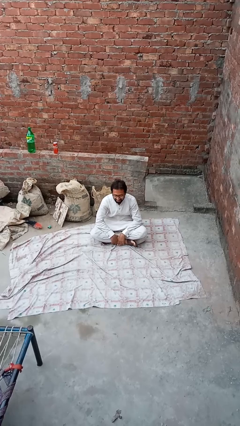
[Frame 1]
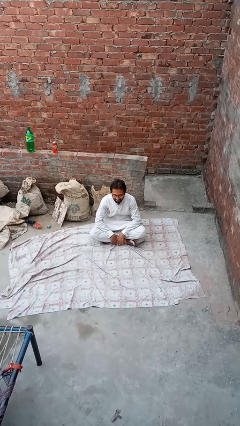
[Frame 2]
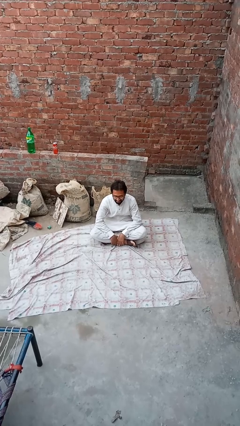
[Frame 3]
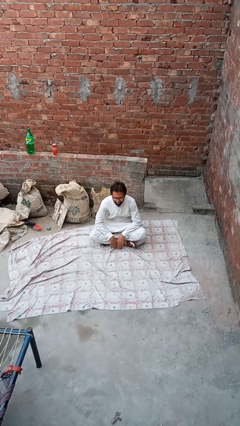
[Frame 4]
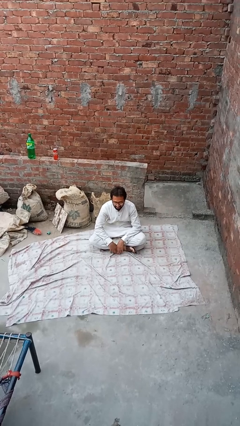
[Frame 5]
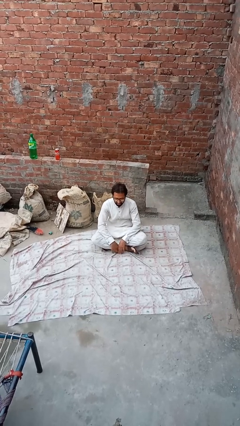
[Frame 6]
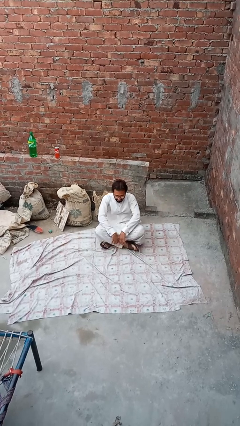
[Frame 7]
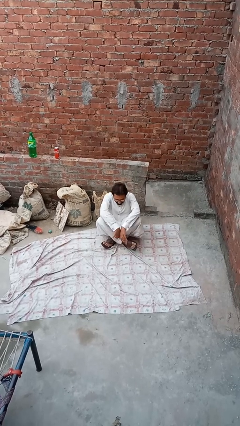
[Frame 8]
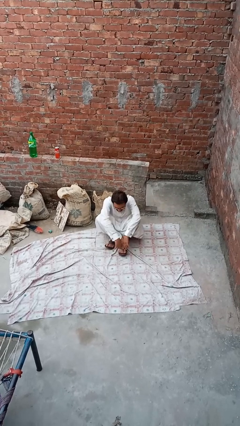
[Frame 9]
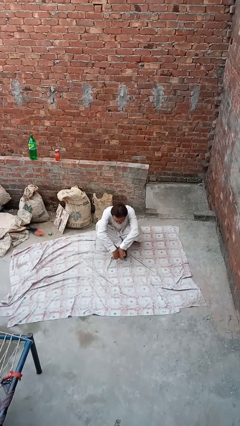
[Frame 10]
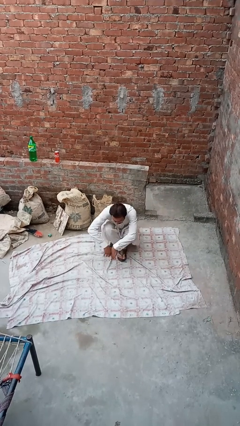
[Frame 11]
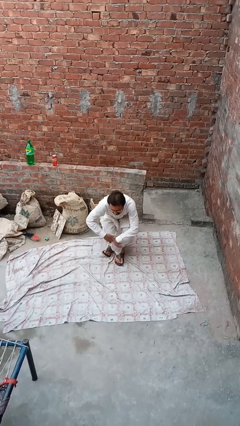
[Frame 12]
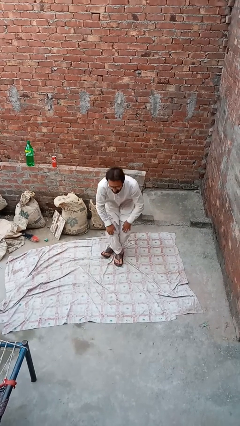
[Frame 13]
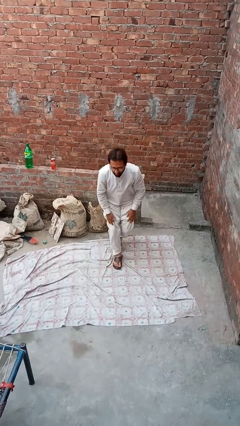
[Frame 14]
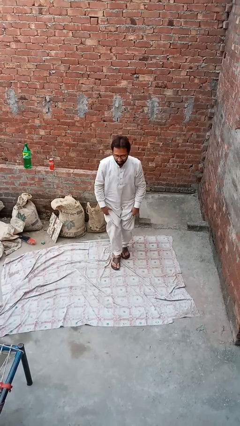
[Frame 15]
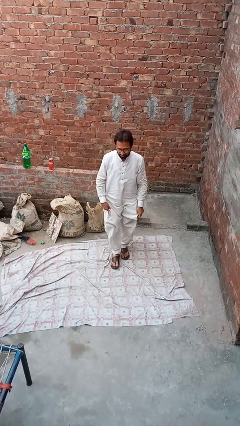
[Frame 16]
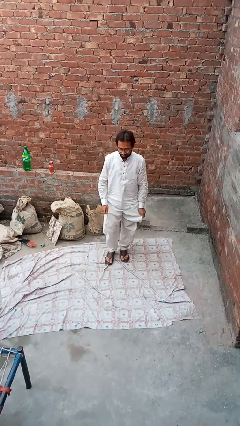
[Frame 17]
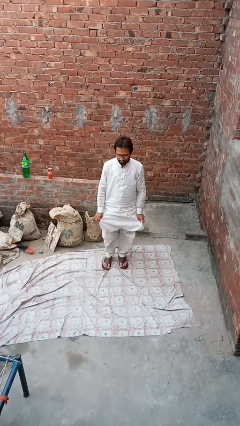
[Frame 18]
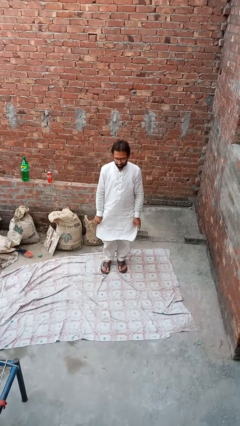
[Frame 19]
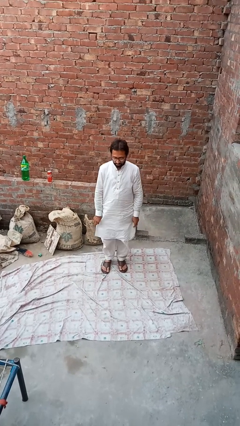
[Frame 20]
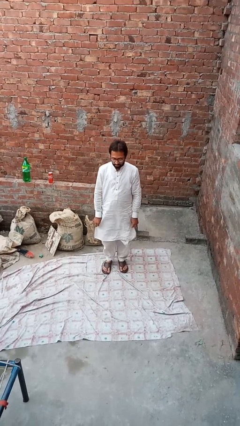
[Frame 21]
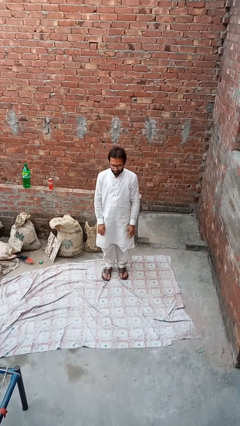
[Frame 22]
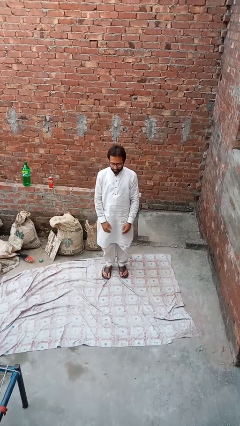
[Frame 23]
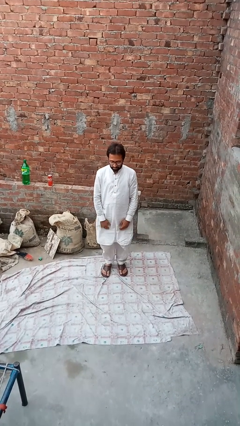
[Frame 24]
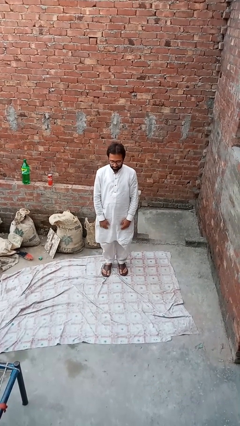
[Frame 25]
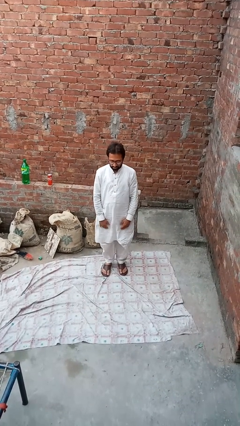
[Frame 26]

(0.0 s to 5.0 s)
person stands up from floor

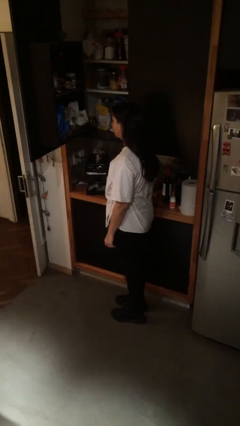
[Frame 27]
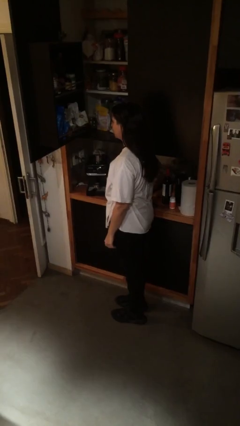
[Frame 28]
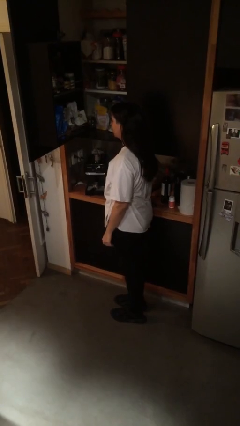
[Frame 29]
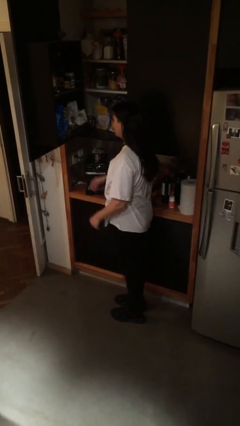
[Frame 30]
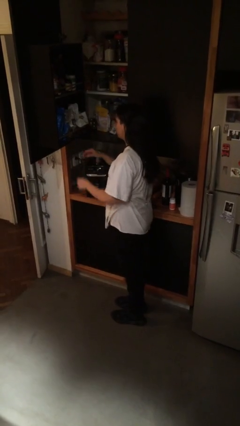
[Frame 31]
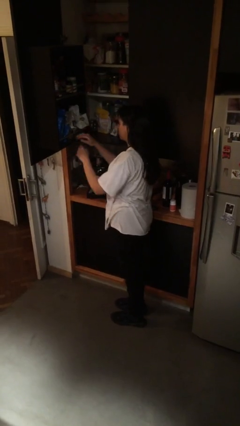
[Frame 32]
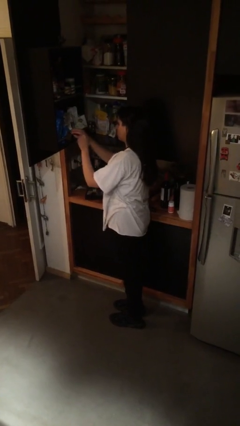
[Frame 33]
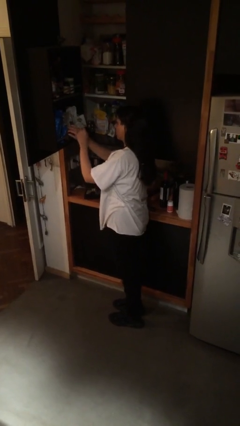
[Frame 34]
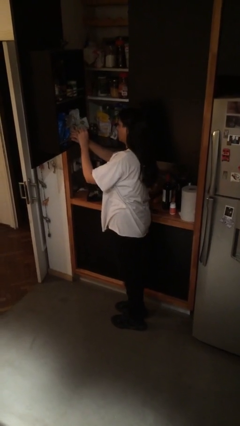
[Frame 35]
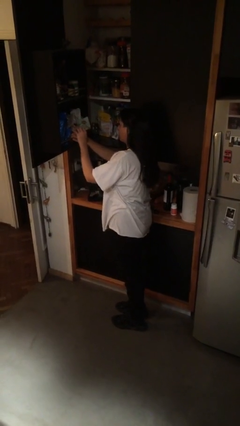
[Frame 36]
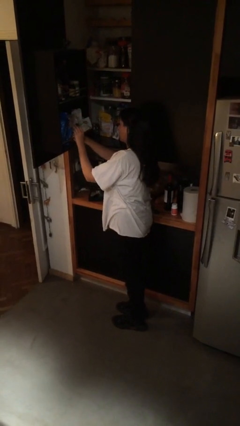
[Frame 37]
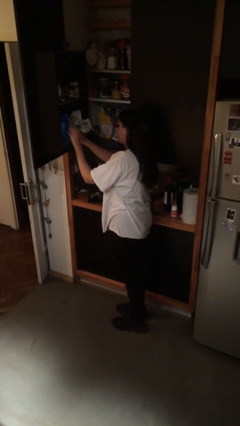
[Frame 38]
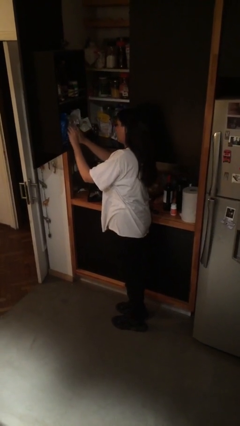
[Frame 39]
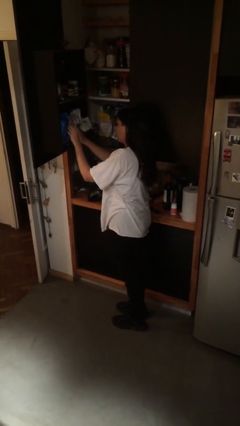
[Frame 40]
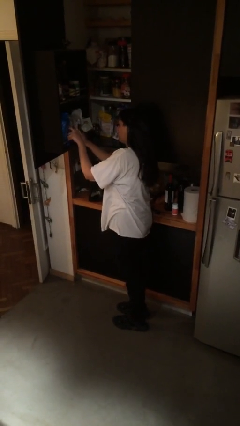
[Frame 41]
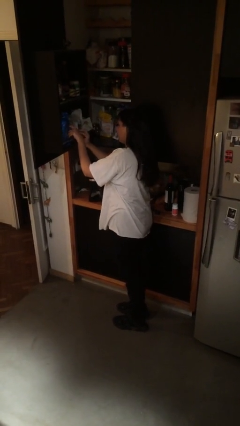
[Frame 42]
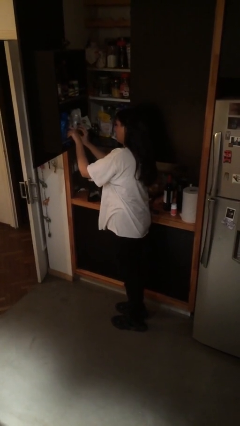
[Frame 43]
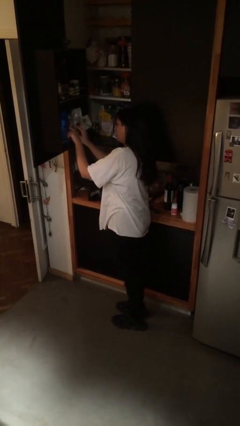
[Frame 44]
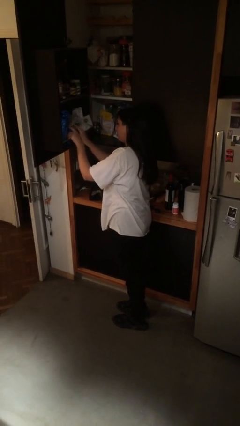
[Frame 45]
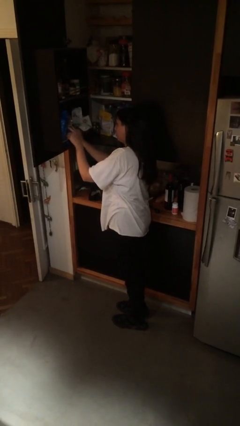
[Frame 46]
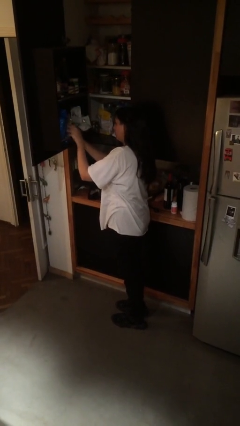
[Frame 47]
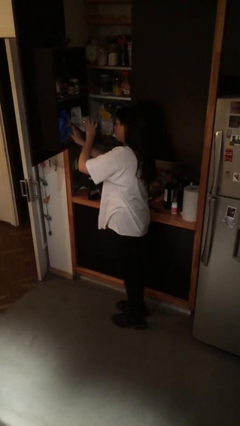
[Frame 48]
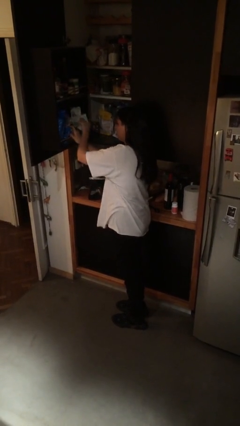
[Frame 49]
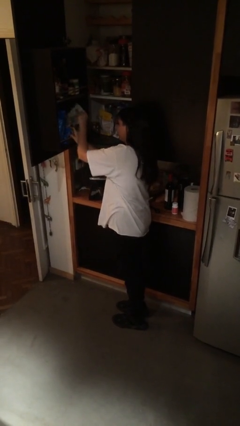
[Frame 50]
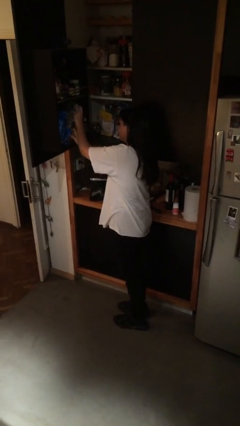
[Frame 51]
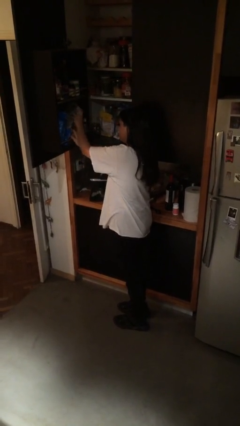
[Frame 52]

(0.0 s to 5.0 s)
person searches in cabinet

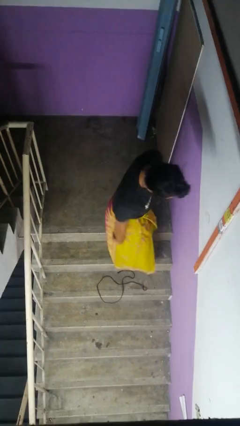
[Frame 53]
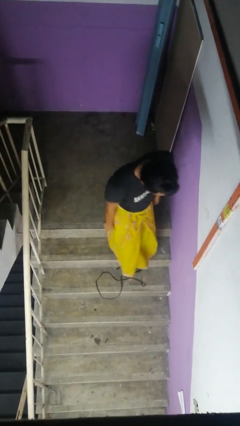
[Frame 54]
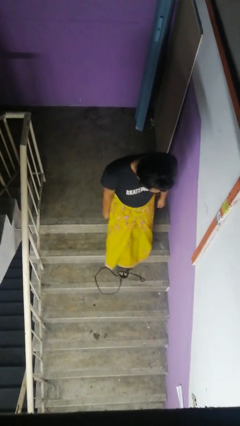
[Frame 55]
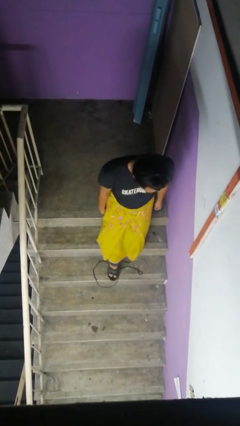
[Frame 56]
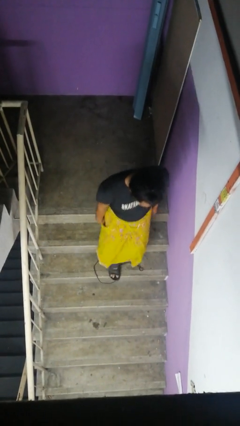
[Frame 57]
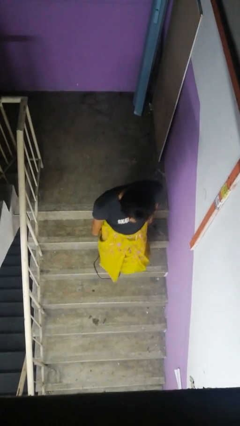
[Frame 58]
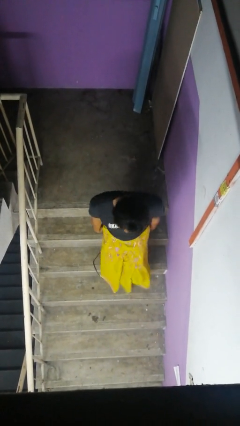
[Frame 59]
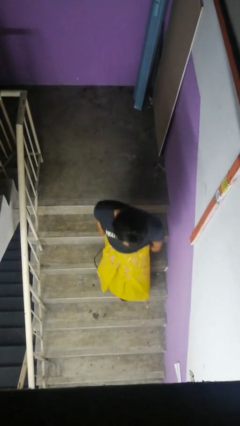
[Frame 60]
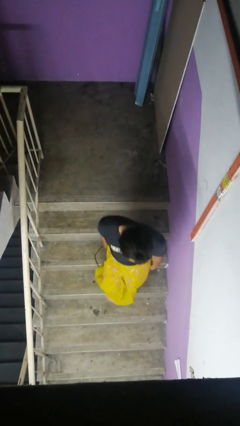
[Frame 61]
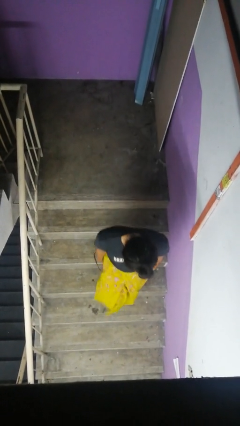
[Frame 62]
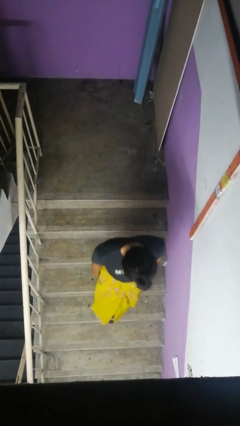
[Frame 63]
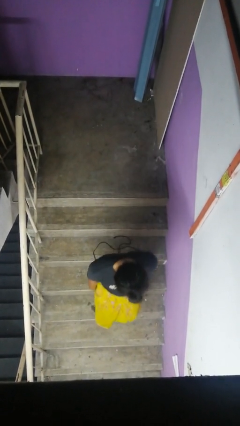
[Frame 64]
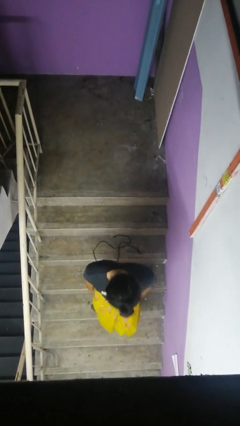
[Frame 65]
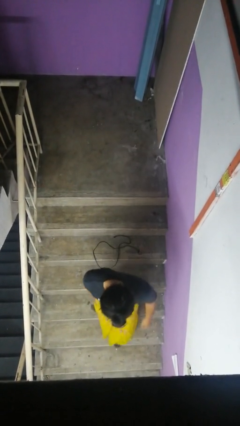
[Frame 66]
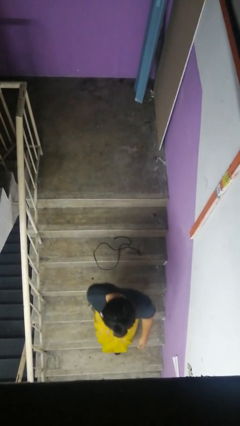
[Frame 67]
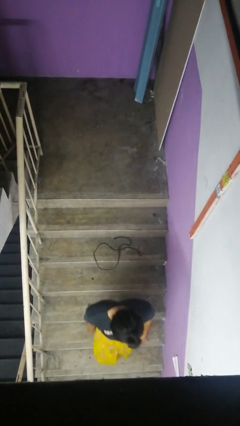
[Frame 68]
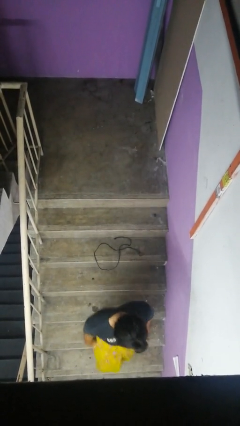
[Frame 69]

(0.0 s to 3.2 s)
person climbs down stairs

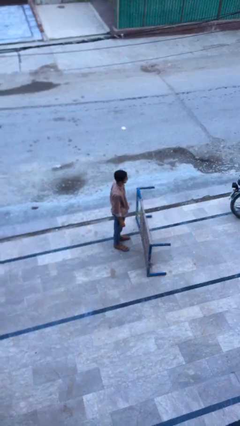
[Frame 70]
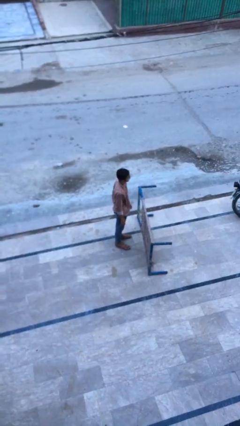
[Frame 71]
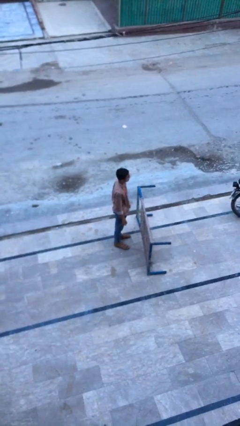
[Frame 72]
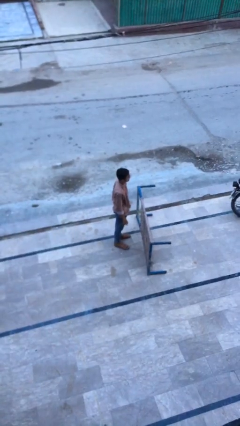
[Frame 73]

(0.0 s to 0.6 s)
person picks up object from floor

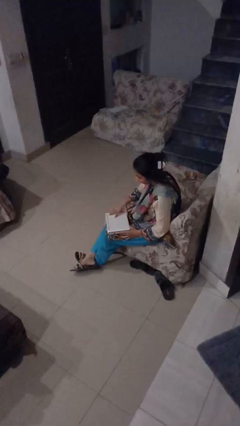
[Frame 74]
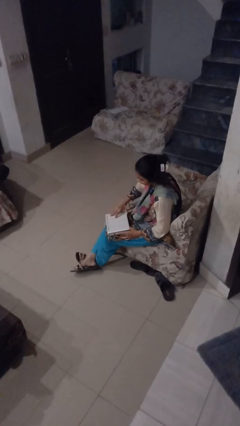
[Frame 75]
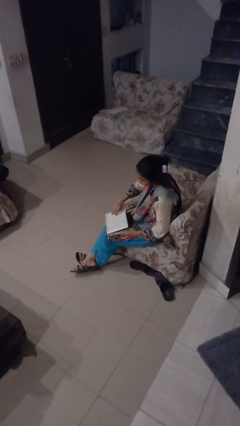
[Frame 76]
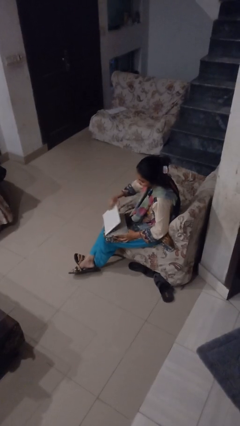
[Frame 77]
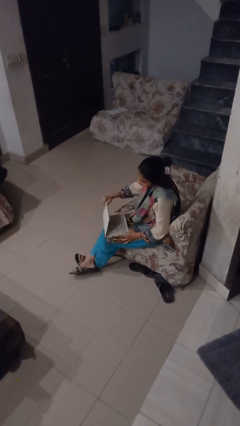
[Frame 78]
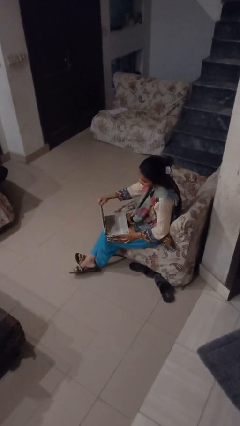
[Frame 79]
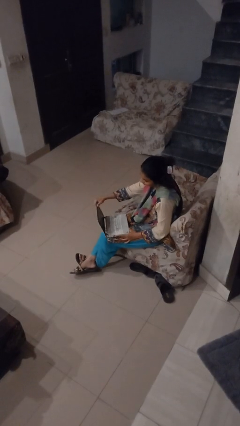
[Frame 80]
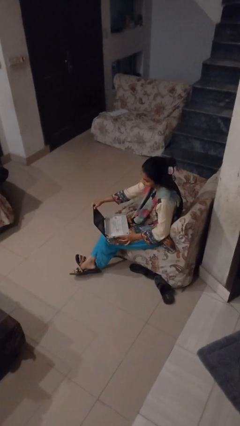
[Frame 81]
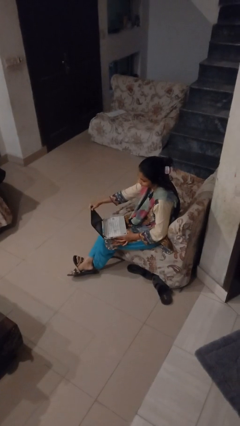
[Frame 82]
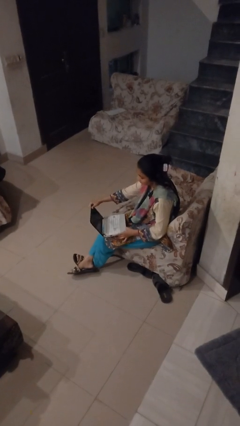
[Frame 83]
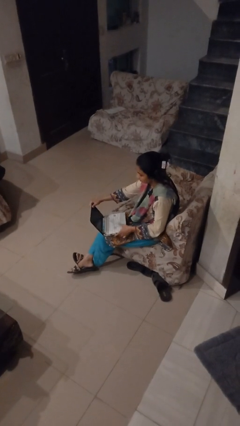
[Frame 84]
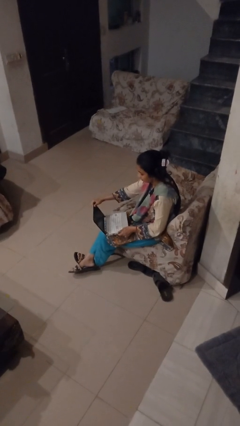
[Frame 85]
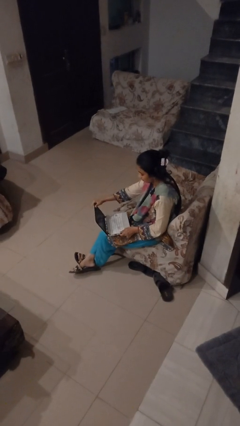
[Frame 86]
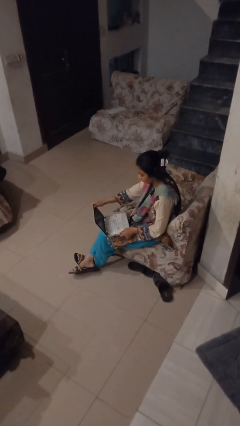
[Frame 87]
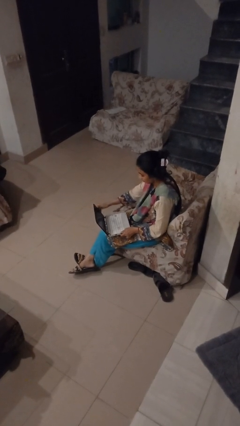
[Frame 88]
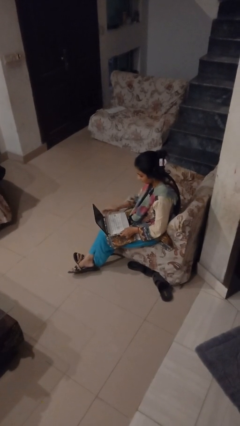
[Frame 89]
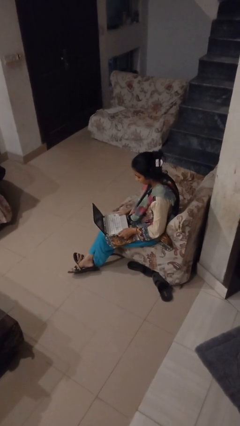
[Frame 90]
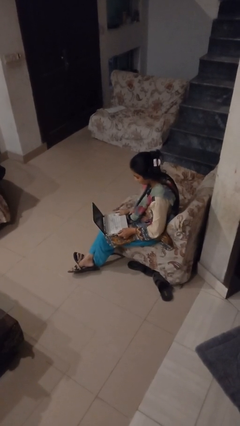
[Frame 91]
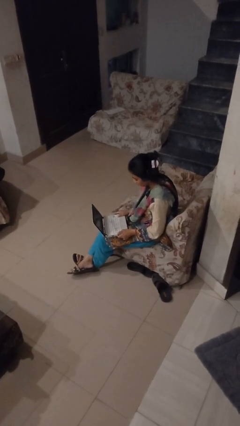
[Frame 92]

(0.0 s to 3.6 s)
person opens laptop

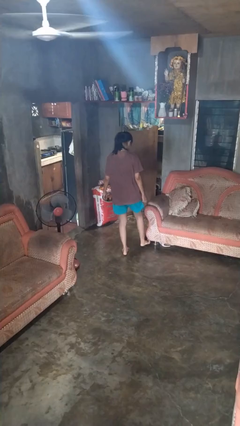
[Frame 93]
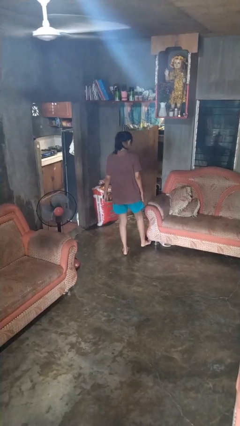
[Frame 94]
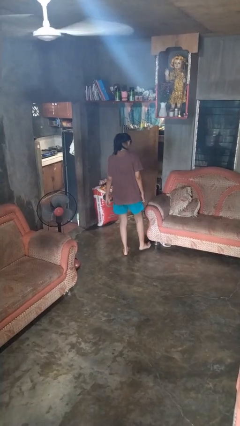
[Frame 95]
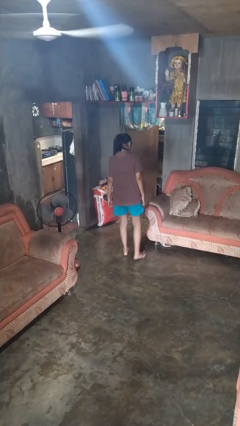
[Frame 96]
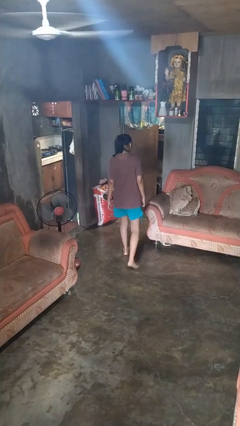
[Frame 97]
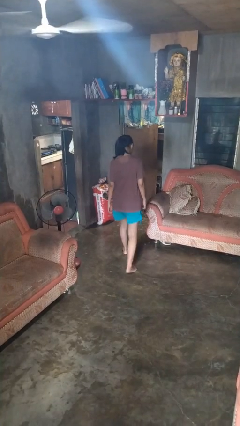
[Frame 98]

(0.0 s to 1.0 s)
person stubs toe
